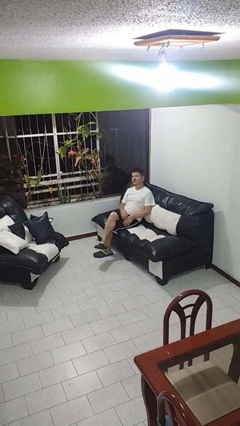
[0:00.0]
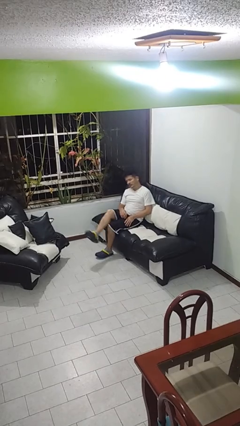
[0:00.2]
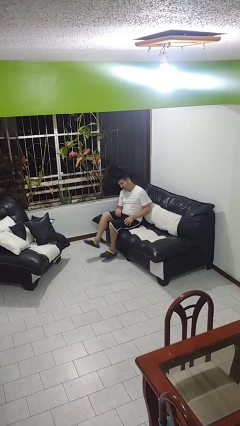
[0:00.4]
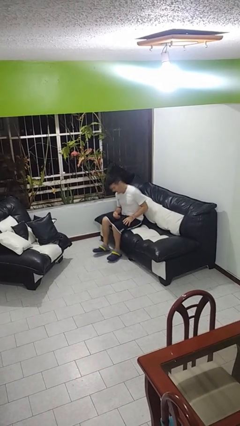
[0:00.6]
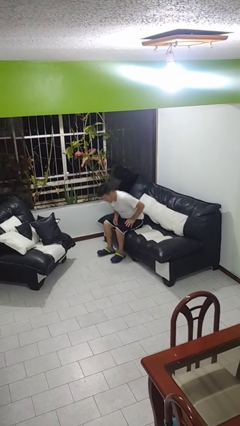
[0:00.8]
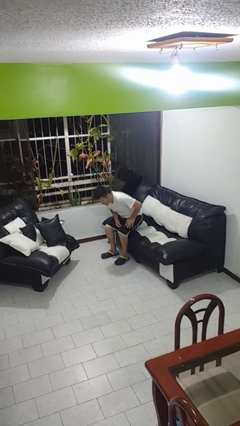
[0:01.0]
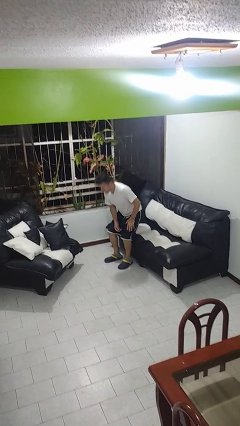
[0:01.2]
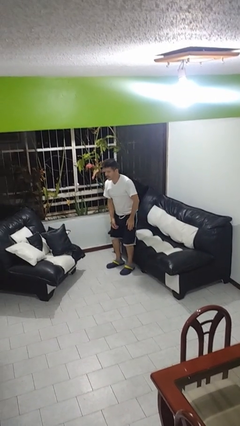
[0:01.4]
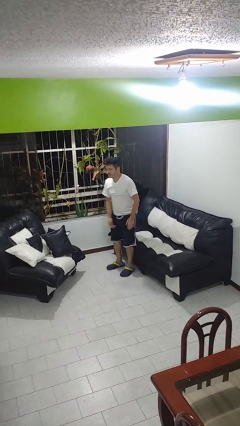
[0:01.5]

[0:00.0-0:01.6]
person stands up

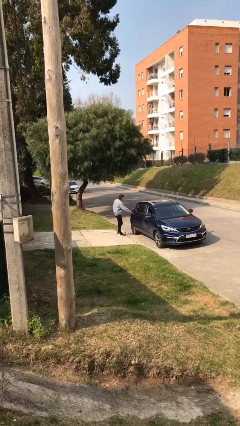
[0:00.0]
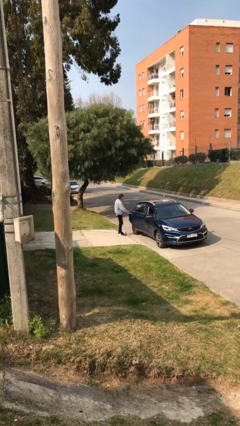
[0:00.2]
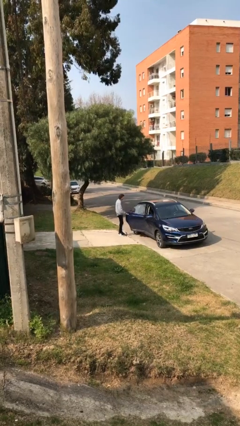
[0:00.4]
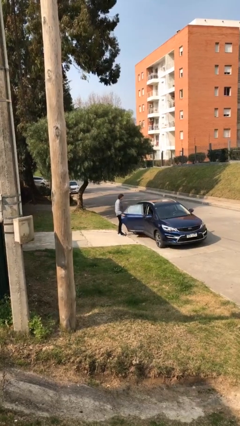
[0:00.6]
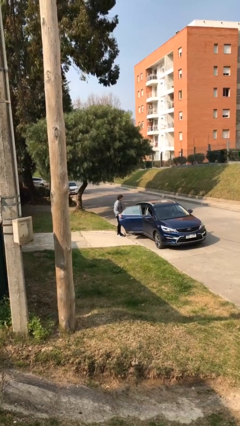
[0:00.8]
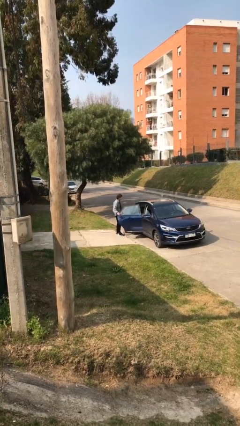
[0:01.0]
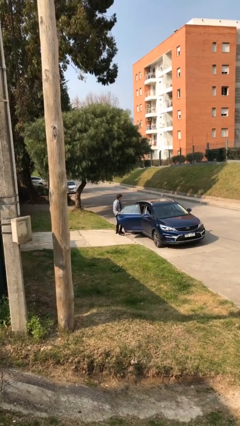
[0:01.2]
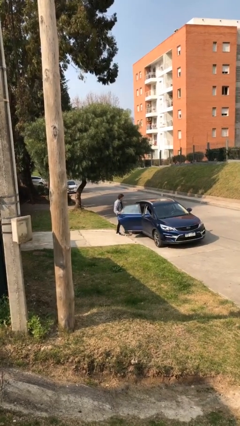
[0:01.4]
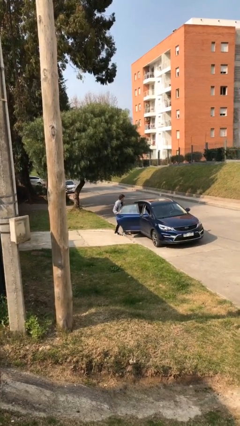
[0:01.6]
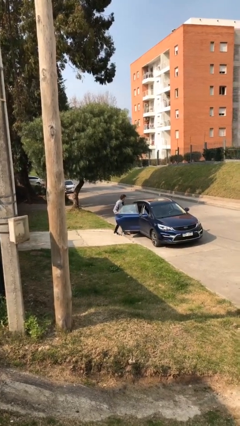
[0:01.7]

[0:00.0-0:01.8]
person opens car door

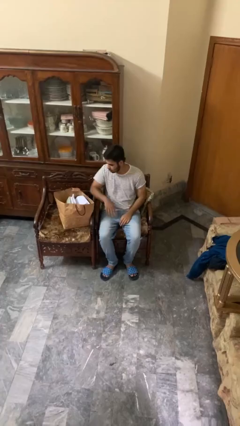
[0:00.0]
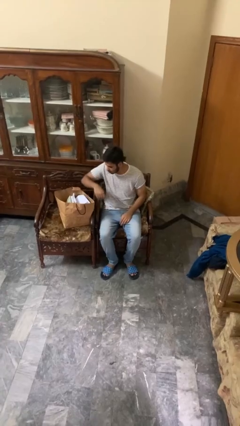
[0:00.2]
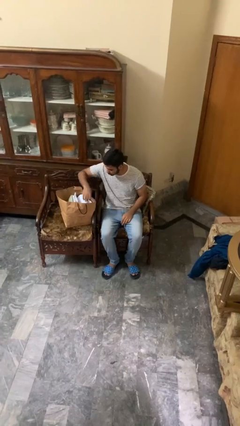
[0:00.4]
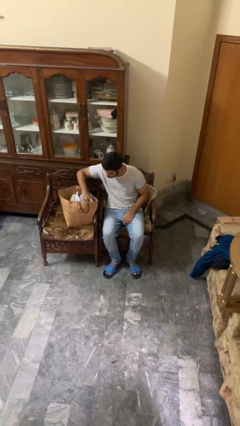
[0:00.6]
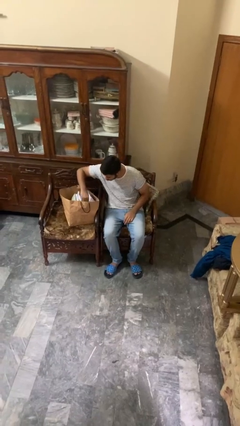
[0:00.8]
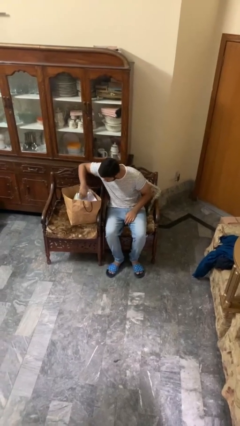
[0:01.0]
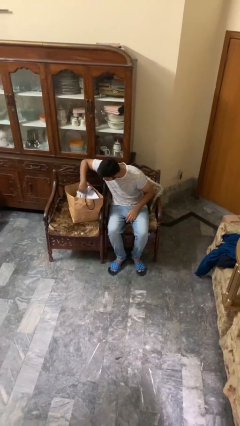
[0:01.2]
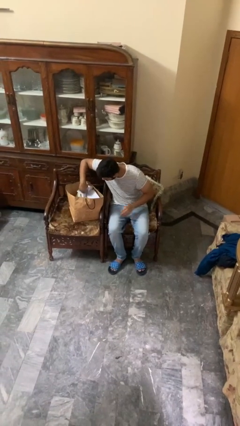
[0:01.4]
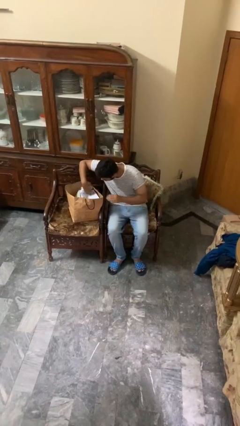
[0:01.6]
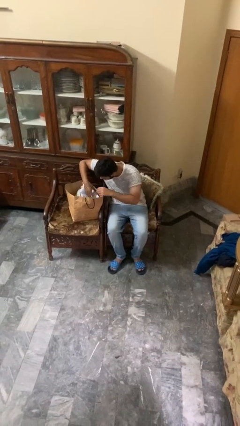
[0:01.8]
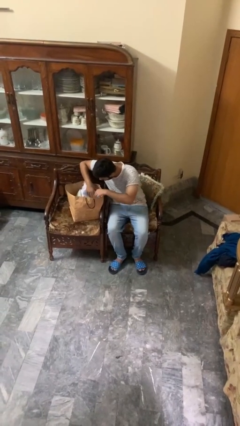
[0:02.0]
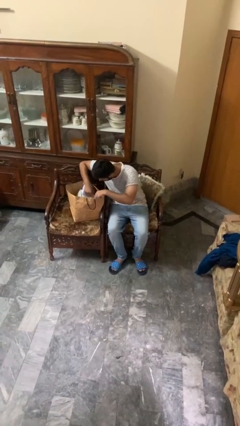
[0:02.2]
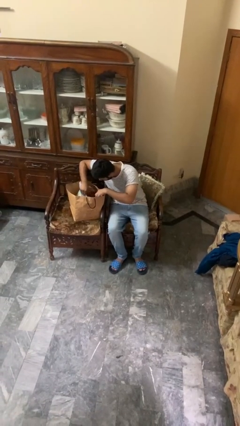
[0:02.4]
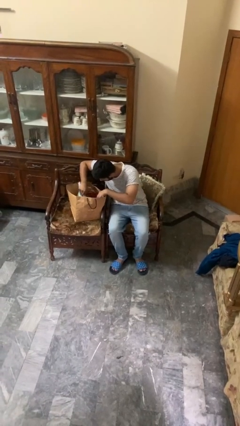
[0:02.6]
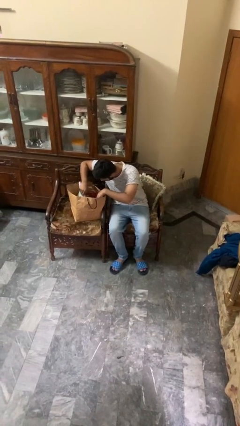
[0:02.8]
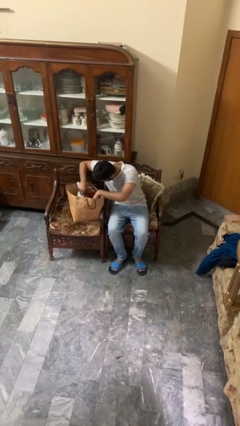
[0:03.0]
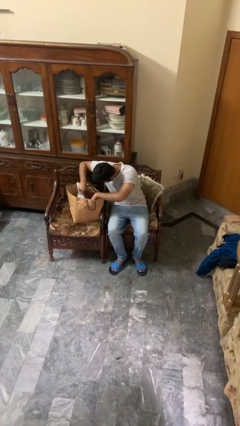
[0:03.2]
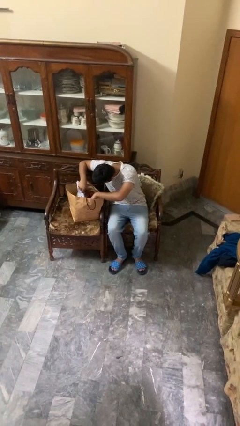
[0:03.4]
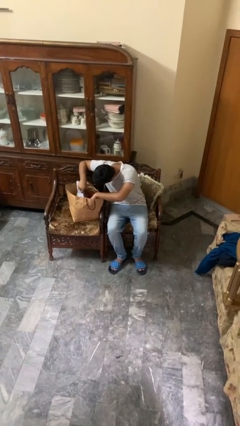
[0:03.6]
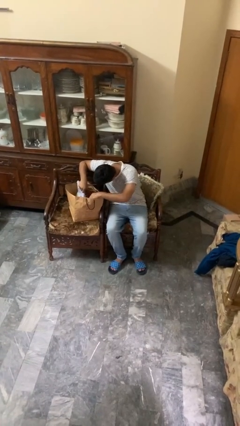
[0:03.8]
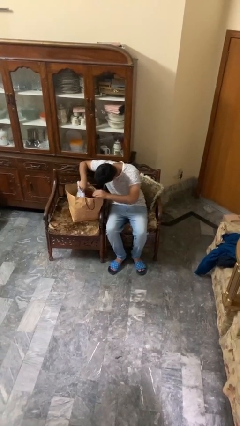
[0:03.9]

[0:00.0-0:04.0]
person searches in bag

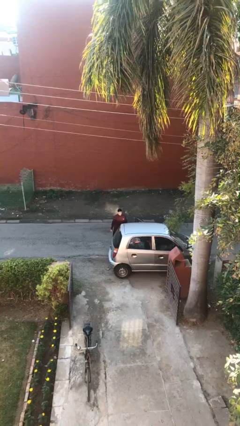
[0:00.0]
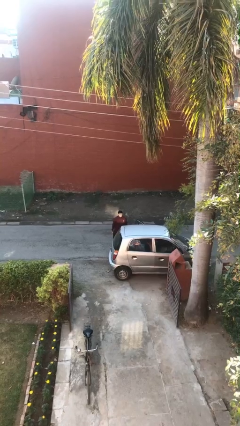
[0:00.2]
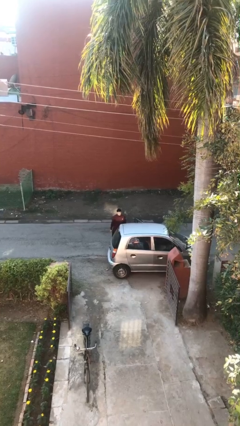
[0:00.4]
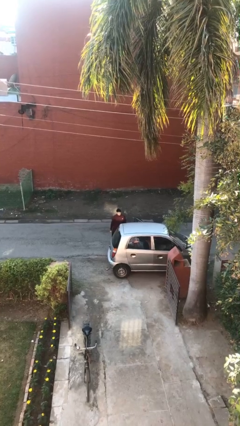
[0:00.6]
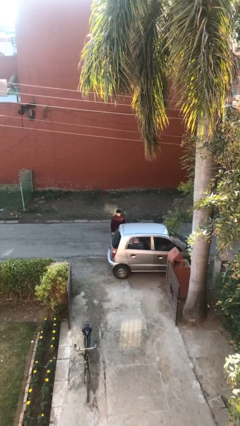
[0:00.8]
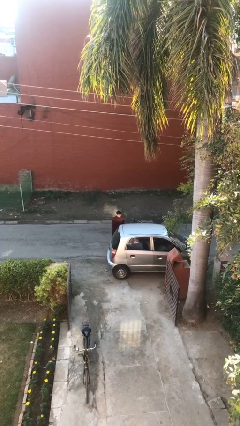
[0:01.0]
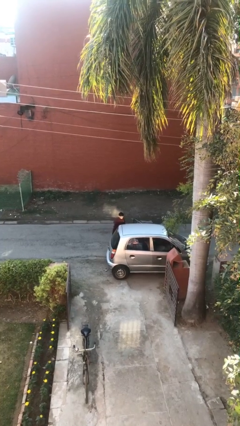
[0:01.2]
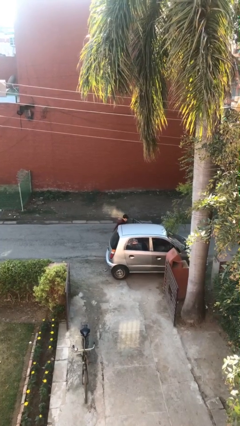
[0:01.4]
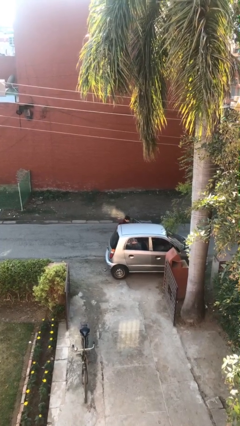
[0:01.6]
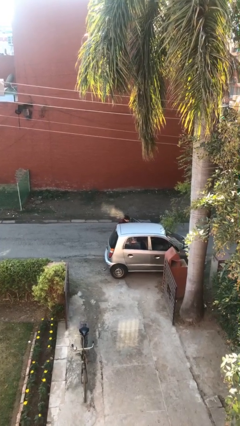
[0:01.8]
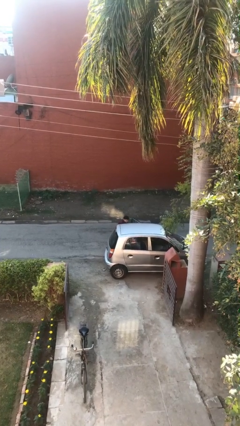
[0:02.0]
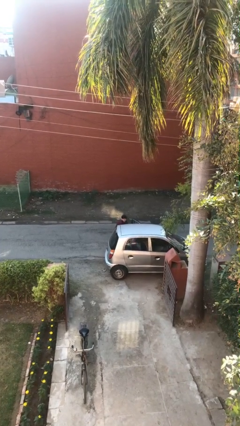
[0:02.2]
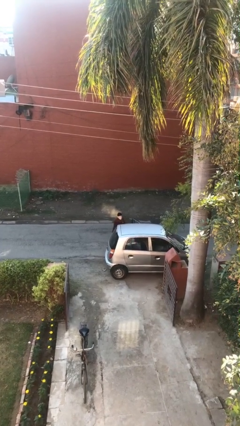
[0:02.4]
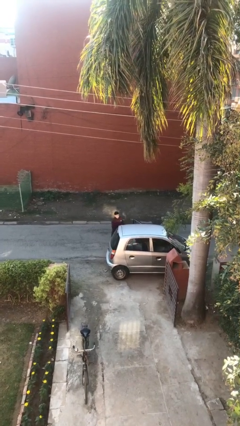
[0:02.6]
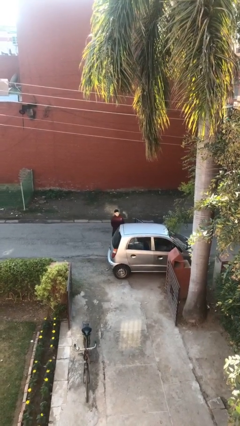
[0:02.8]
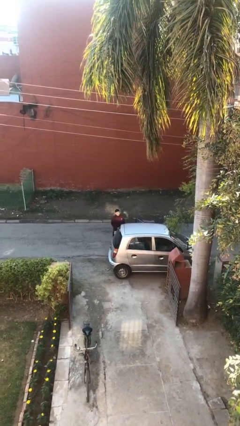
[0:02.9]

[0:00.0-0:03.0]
person unloads car

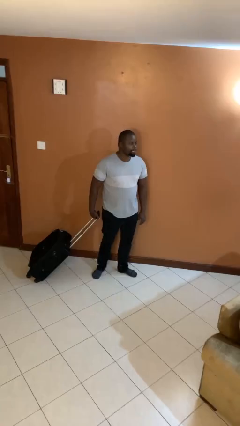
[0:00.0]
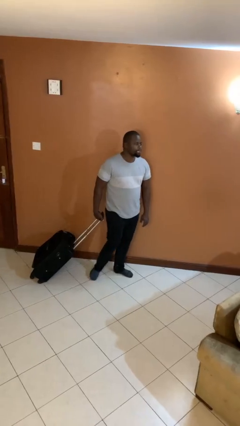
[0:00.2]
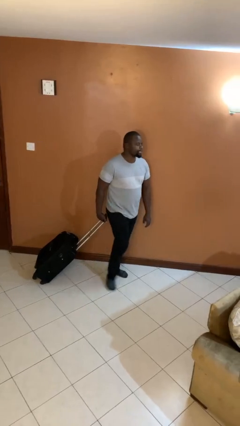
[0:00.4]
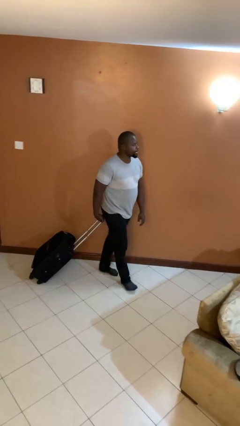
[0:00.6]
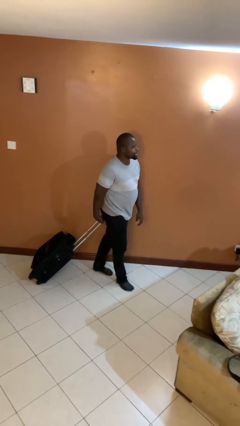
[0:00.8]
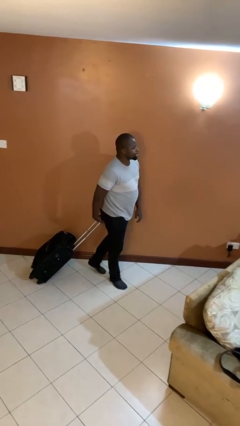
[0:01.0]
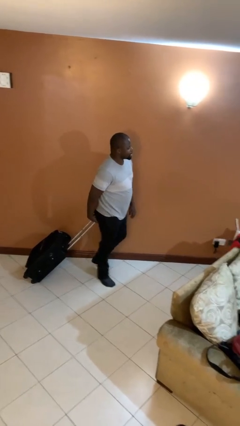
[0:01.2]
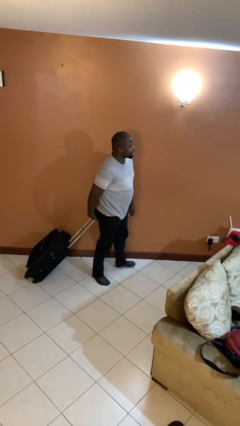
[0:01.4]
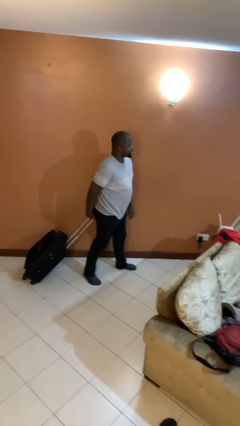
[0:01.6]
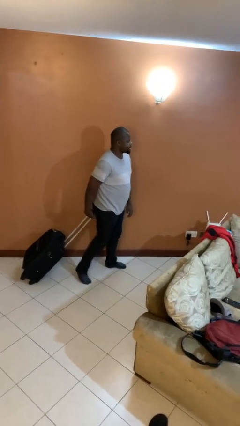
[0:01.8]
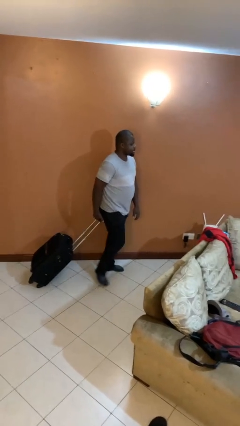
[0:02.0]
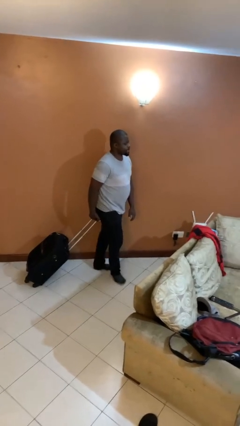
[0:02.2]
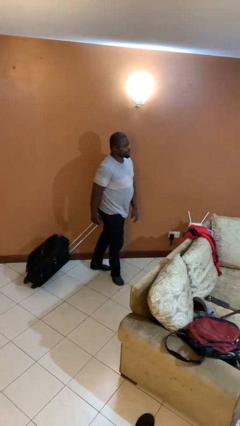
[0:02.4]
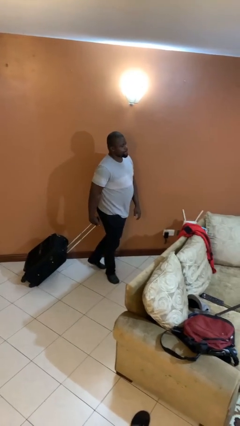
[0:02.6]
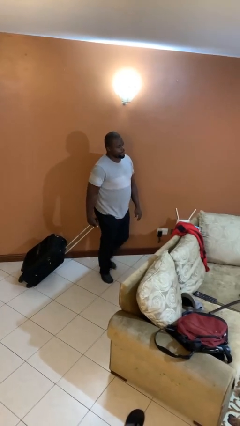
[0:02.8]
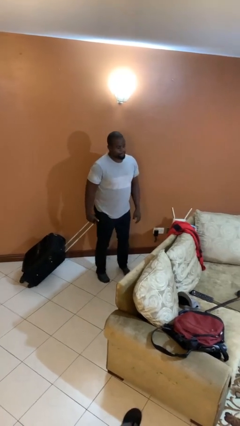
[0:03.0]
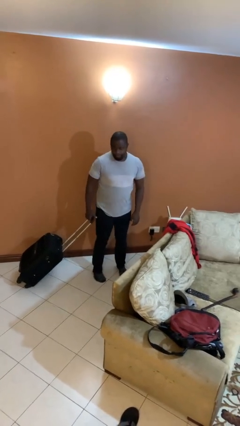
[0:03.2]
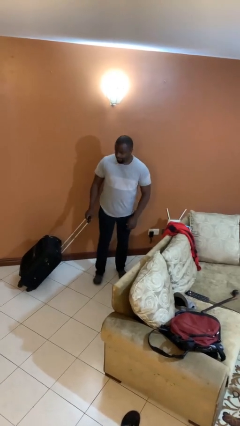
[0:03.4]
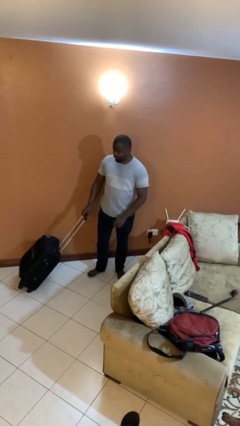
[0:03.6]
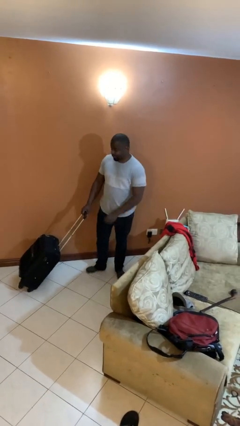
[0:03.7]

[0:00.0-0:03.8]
person pulls wheeled cart

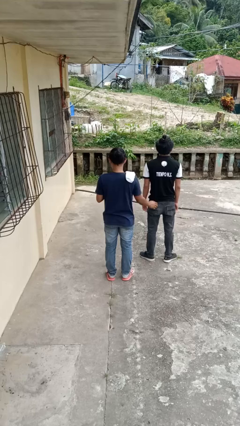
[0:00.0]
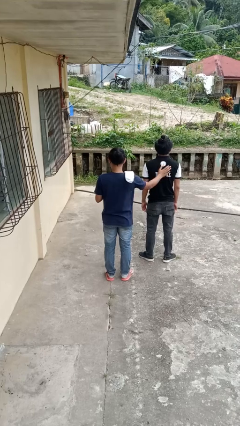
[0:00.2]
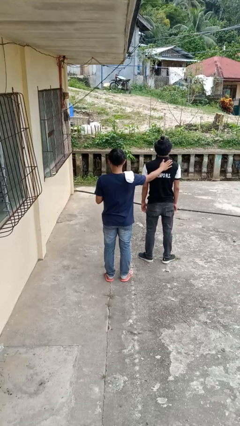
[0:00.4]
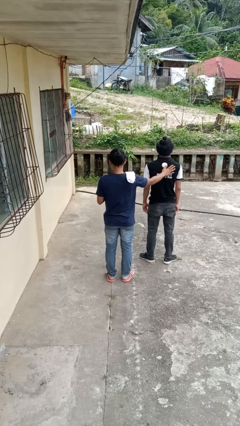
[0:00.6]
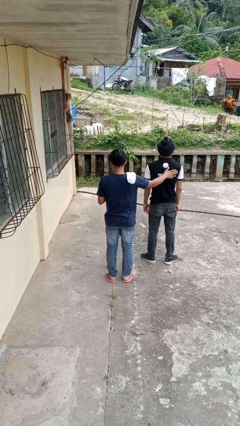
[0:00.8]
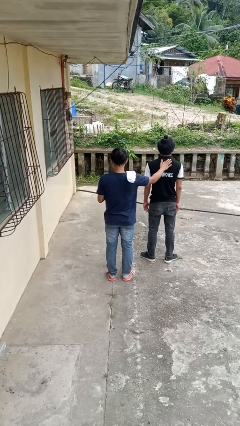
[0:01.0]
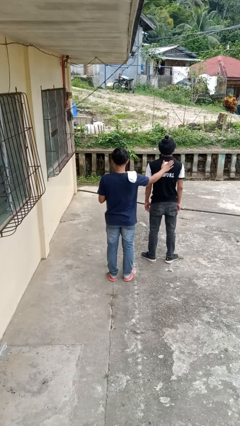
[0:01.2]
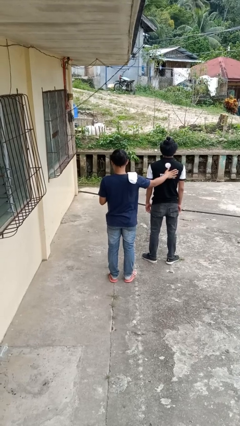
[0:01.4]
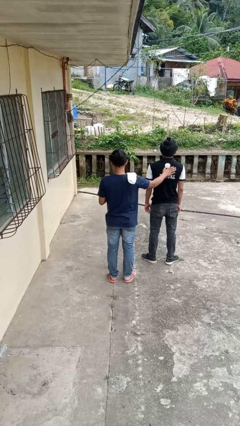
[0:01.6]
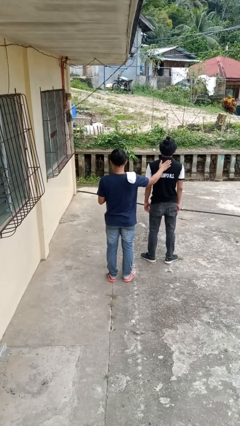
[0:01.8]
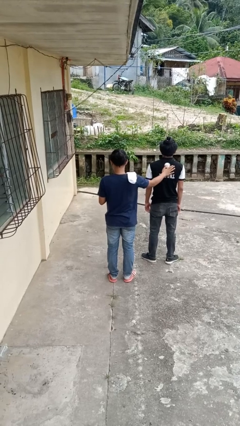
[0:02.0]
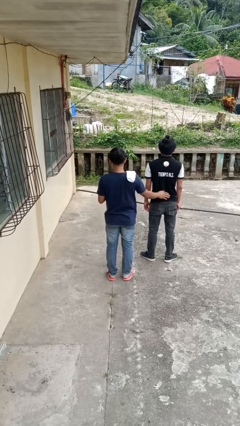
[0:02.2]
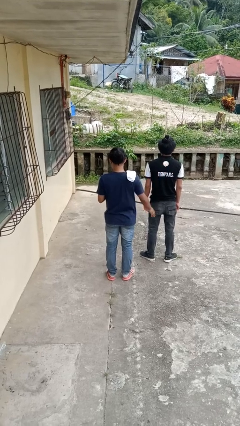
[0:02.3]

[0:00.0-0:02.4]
person touches back of person

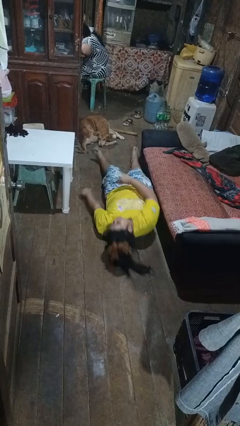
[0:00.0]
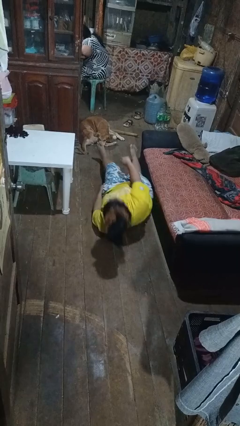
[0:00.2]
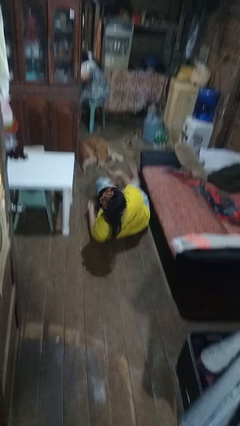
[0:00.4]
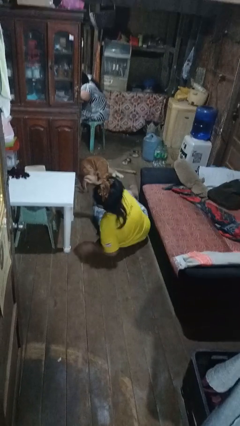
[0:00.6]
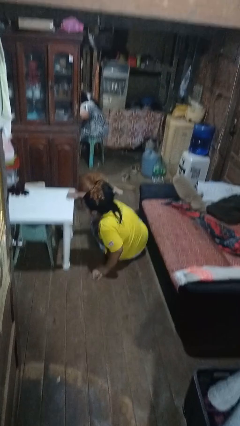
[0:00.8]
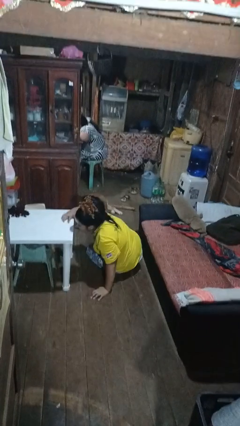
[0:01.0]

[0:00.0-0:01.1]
person stands up from floor
